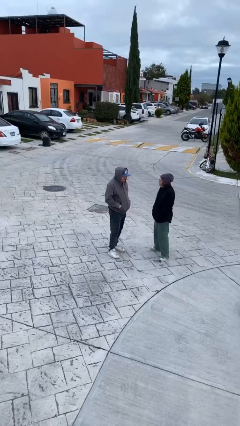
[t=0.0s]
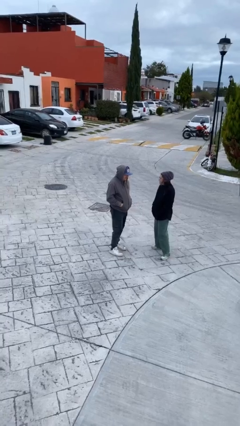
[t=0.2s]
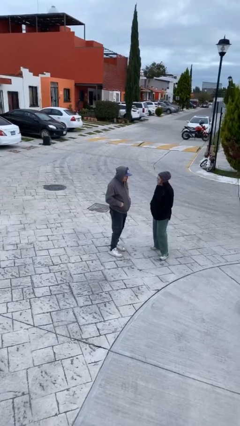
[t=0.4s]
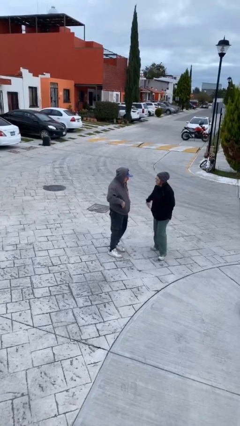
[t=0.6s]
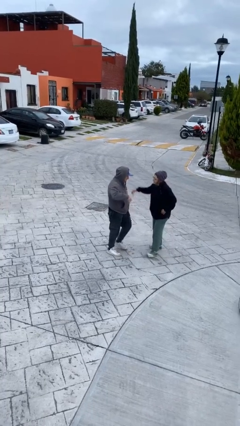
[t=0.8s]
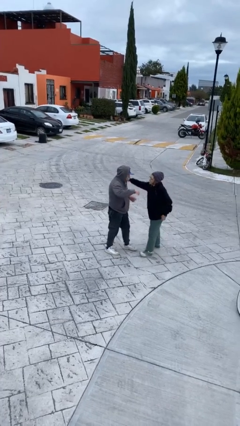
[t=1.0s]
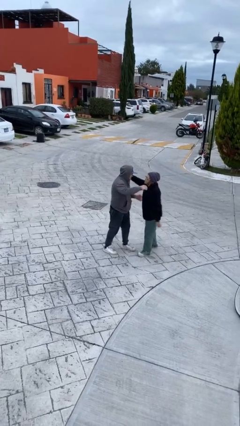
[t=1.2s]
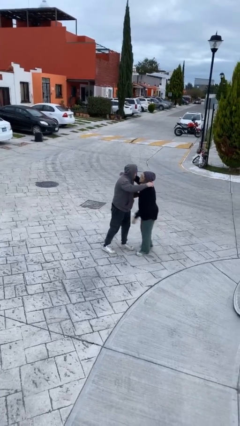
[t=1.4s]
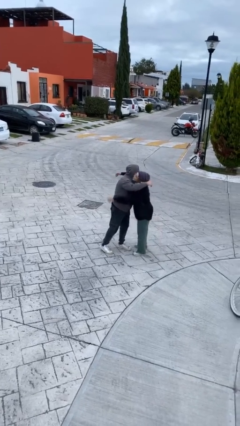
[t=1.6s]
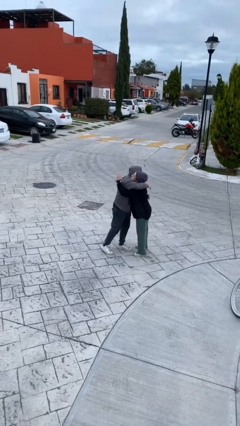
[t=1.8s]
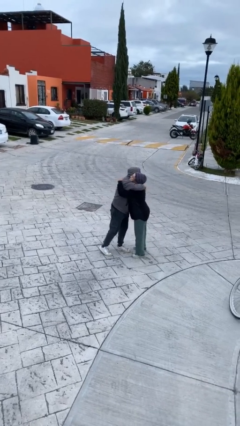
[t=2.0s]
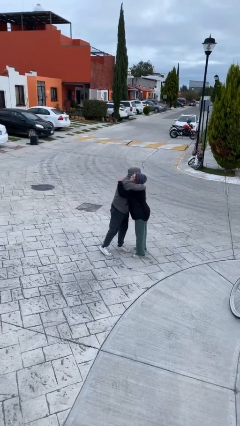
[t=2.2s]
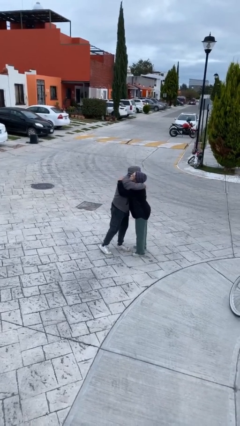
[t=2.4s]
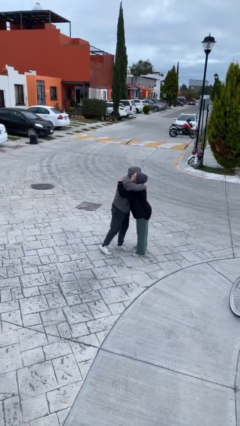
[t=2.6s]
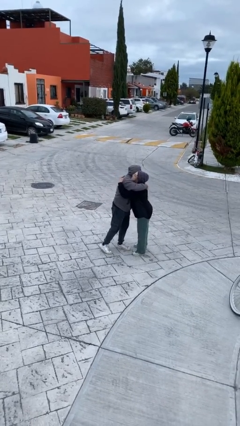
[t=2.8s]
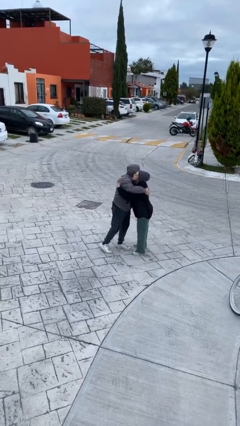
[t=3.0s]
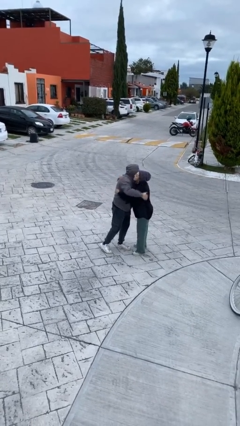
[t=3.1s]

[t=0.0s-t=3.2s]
person embraces person

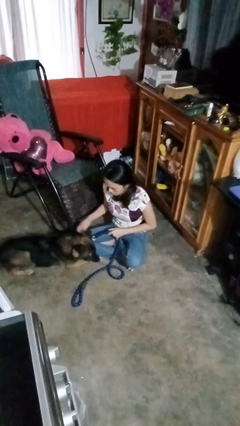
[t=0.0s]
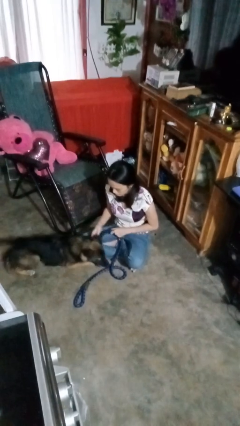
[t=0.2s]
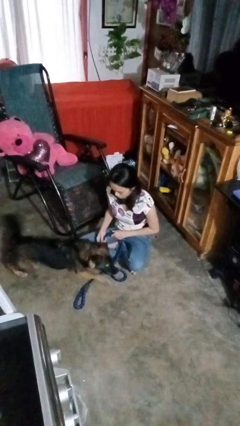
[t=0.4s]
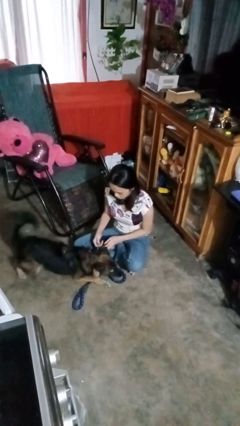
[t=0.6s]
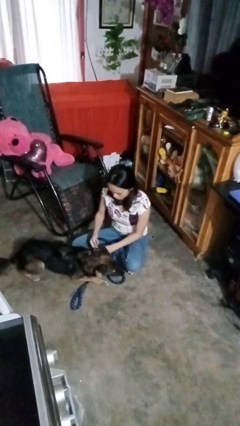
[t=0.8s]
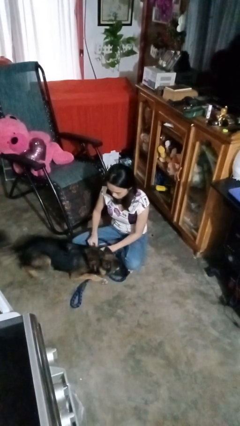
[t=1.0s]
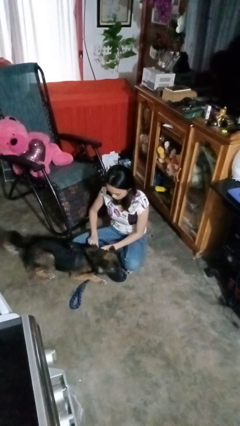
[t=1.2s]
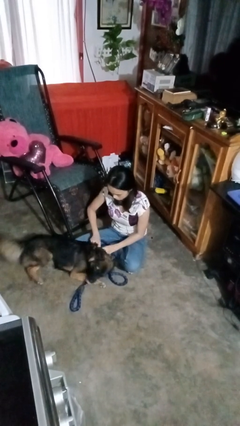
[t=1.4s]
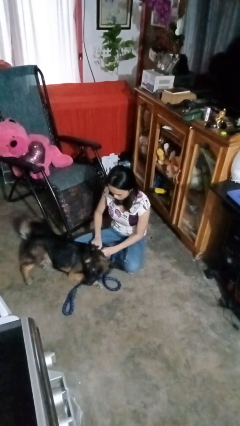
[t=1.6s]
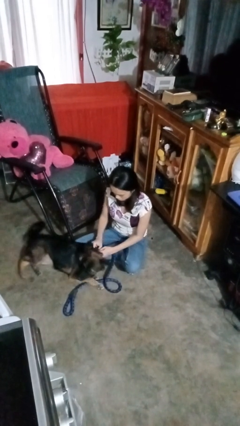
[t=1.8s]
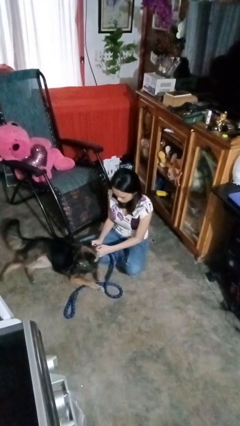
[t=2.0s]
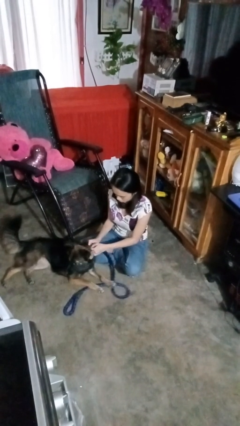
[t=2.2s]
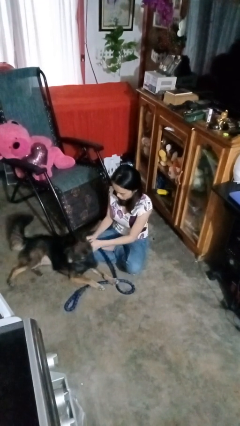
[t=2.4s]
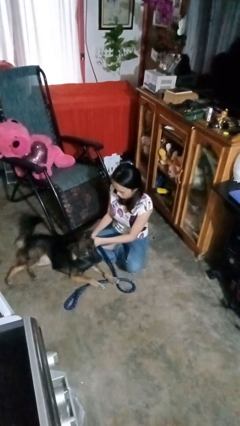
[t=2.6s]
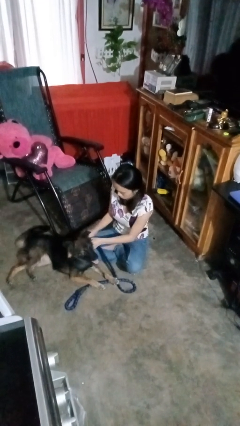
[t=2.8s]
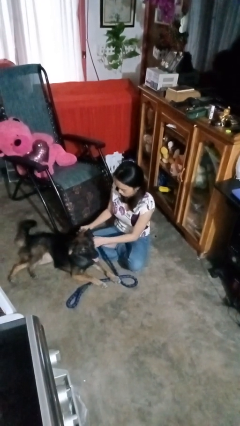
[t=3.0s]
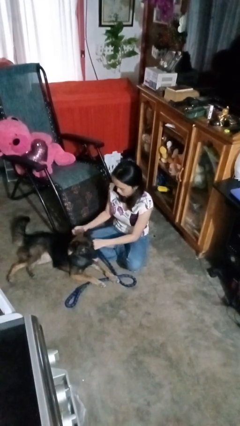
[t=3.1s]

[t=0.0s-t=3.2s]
person unattaches leash from dog

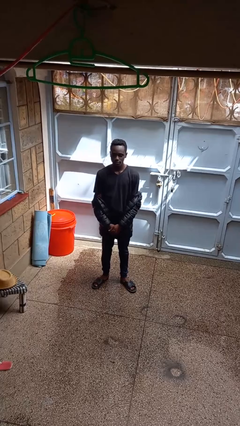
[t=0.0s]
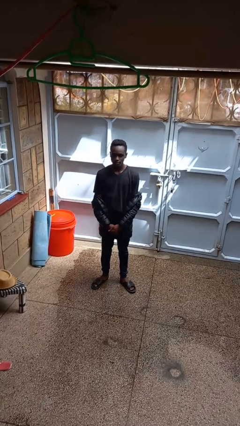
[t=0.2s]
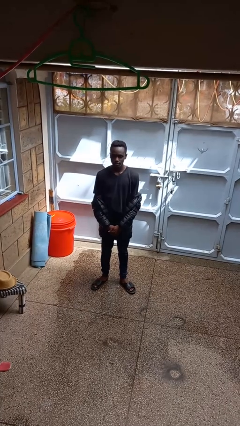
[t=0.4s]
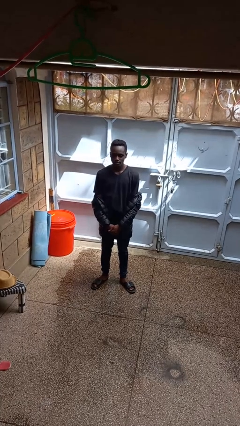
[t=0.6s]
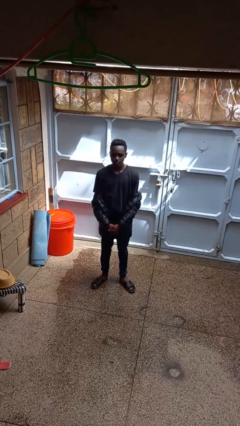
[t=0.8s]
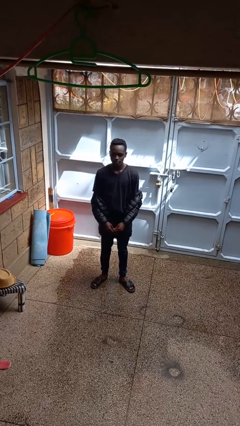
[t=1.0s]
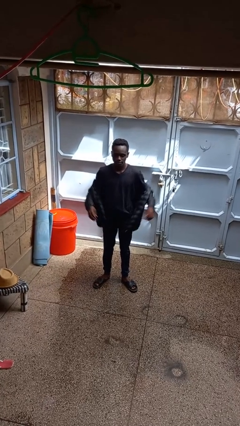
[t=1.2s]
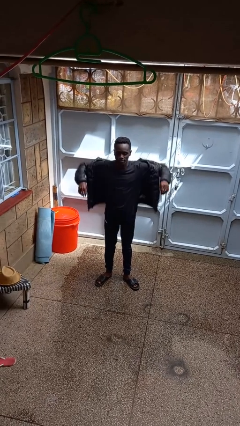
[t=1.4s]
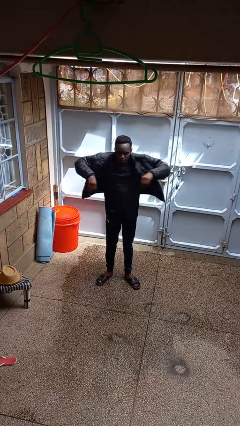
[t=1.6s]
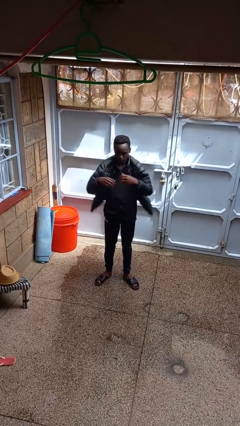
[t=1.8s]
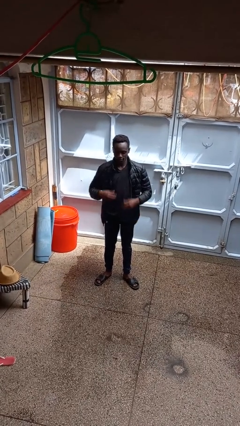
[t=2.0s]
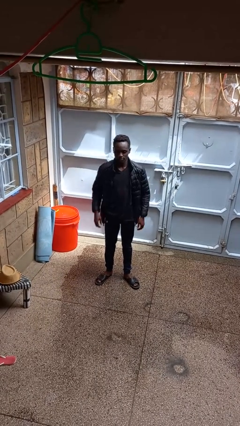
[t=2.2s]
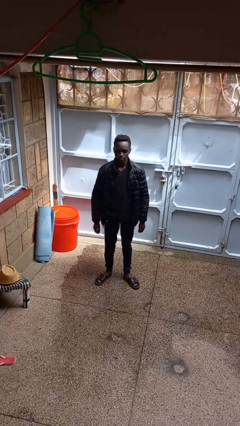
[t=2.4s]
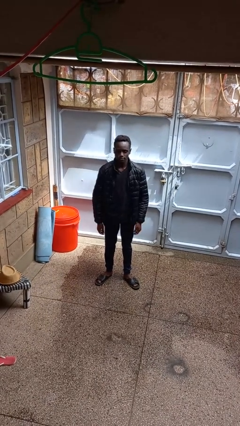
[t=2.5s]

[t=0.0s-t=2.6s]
person puts on jacket

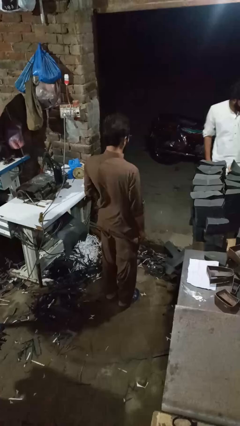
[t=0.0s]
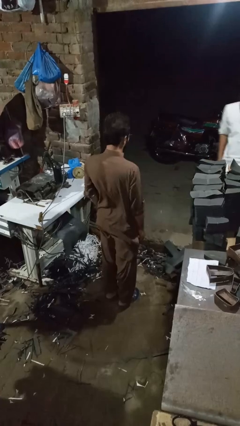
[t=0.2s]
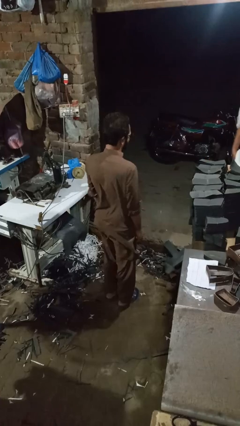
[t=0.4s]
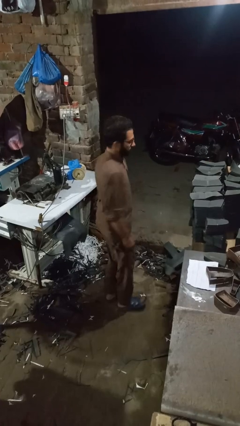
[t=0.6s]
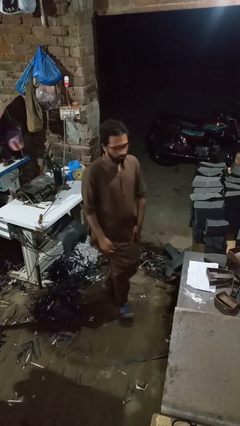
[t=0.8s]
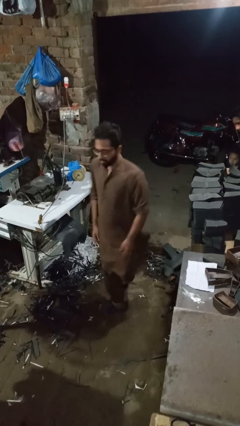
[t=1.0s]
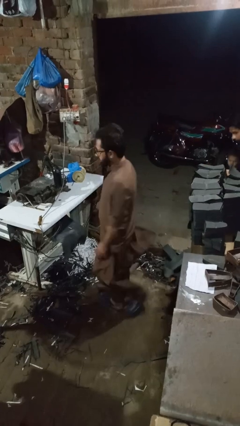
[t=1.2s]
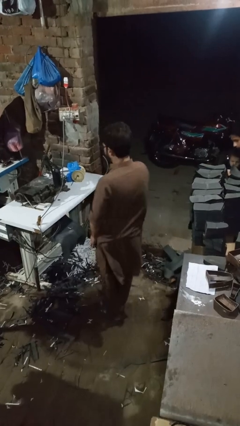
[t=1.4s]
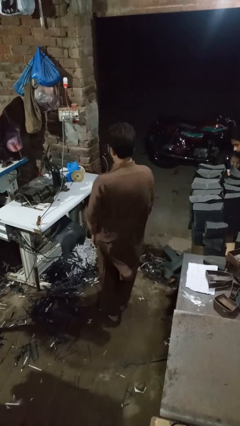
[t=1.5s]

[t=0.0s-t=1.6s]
person twirls

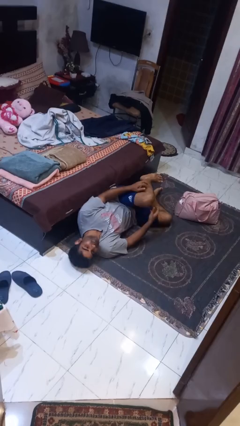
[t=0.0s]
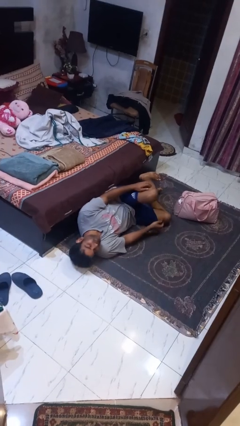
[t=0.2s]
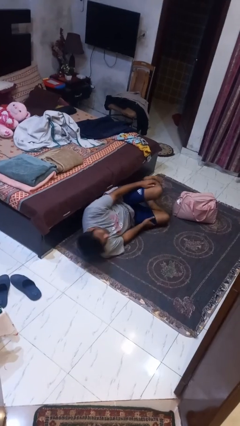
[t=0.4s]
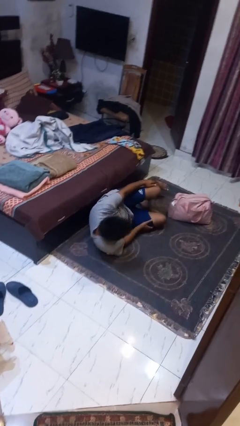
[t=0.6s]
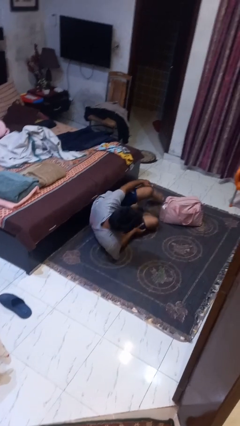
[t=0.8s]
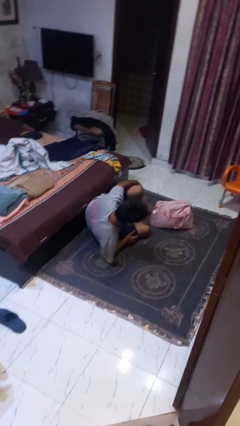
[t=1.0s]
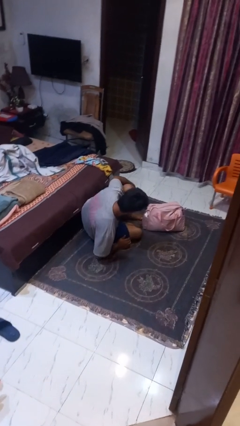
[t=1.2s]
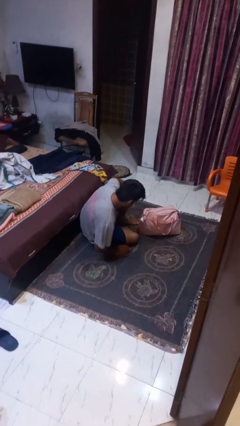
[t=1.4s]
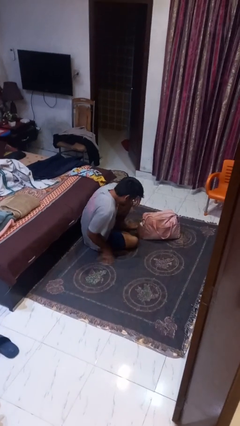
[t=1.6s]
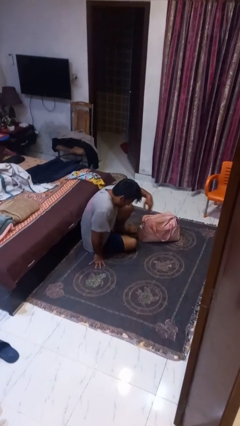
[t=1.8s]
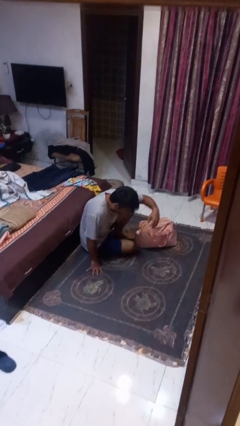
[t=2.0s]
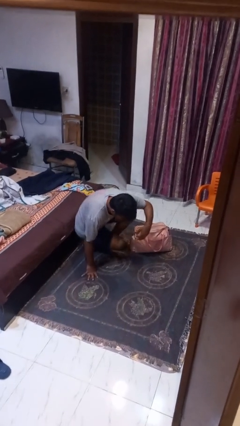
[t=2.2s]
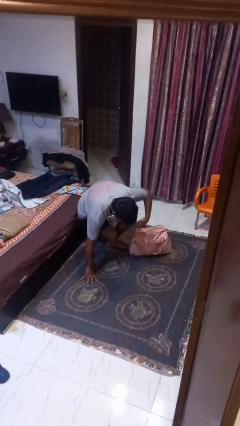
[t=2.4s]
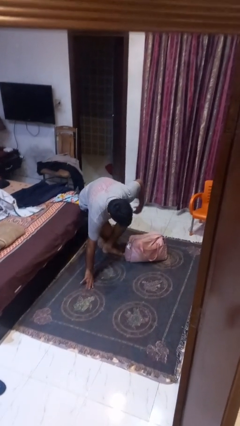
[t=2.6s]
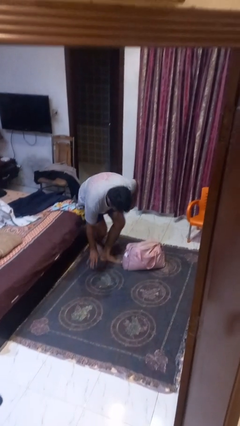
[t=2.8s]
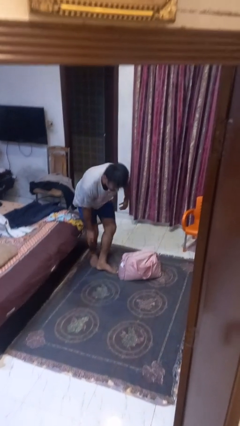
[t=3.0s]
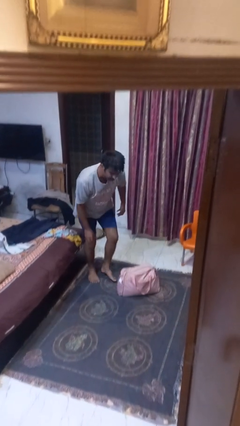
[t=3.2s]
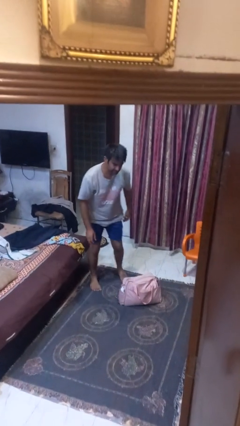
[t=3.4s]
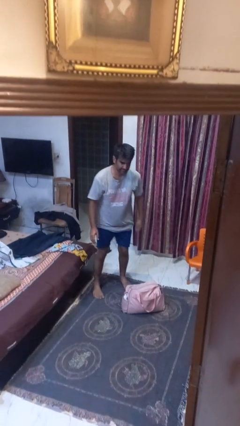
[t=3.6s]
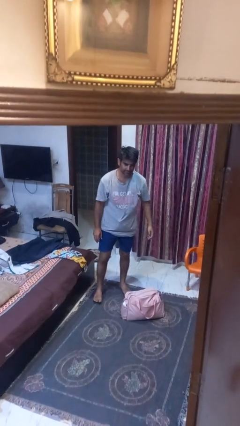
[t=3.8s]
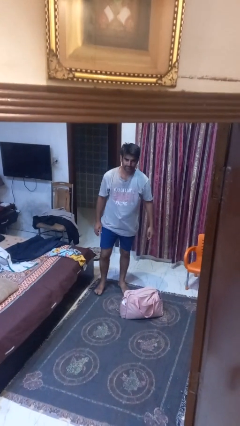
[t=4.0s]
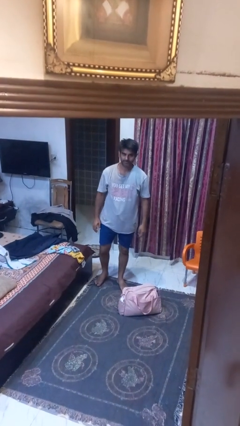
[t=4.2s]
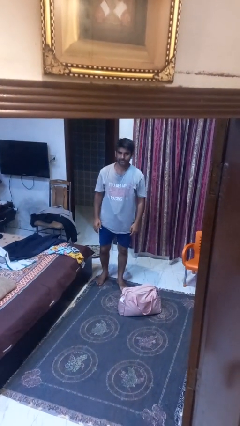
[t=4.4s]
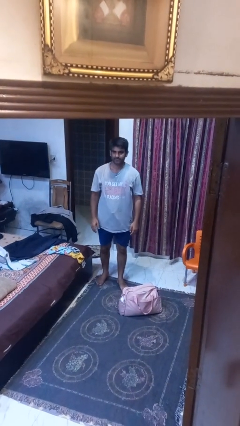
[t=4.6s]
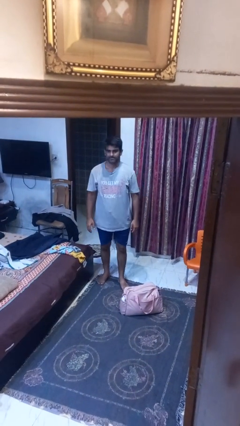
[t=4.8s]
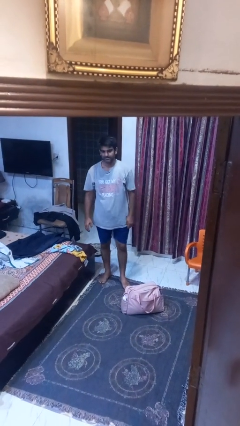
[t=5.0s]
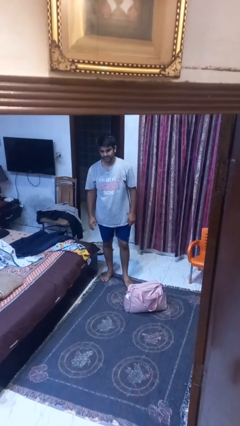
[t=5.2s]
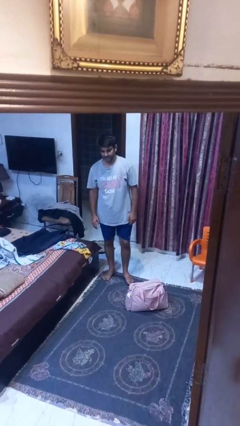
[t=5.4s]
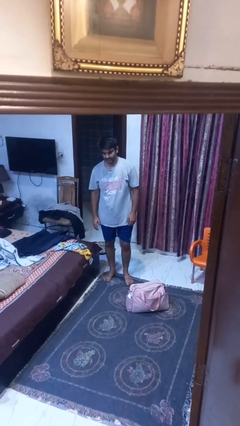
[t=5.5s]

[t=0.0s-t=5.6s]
person stands up from floor

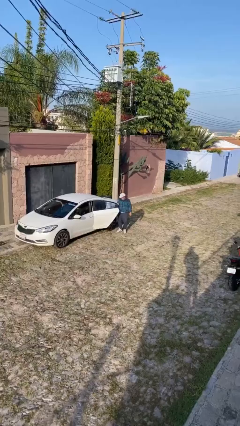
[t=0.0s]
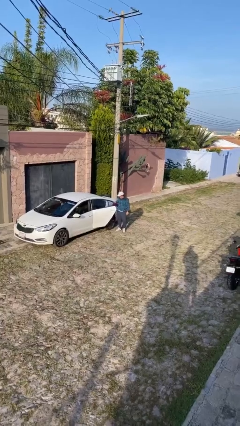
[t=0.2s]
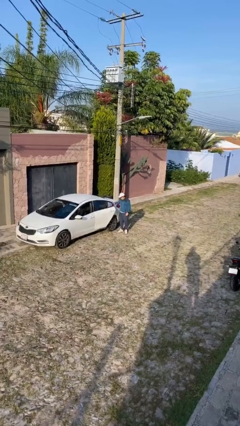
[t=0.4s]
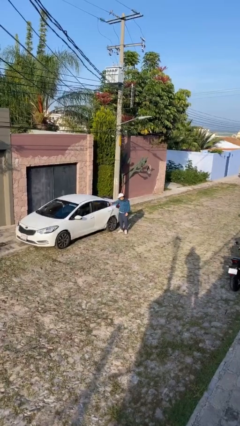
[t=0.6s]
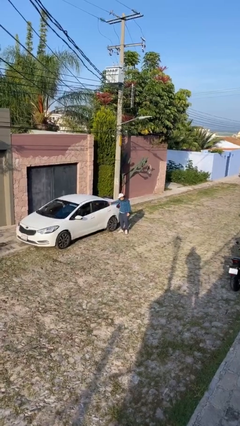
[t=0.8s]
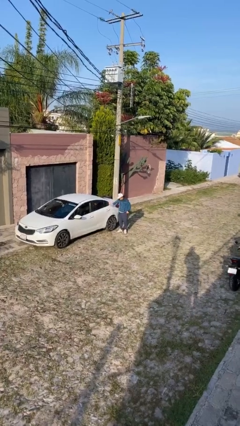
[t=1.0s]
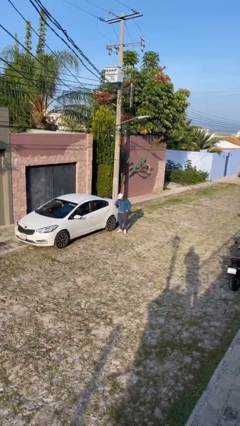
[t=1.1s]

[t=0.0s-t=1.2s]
person closes car door
